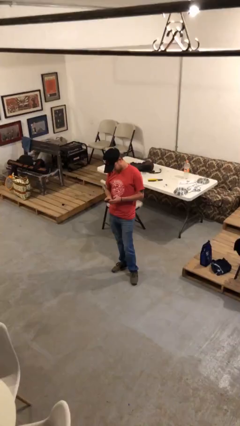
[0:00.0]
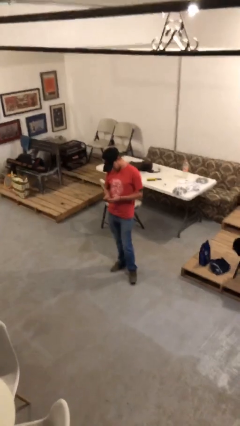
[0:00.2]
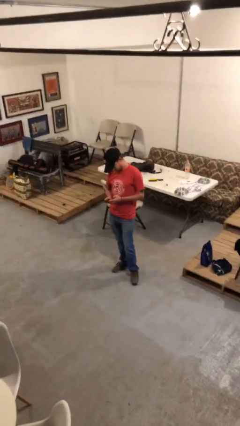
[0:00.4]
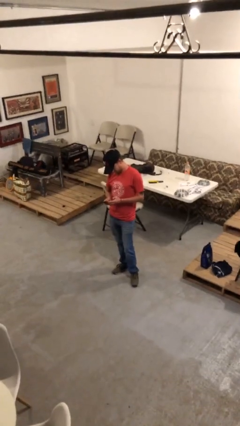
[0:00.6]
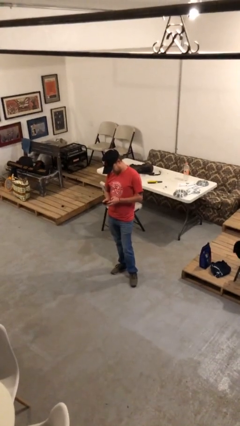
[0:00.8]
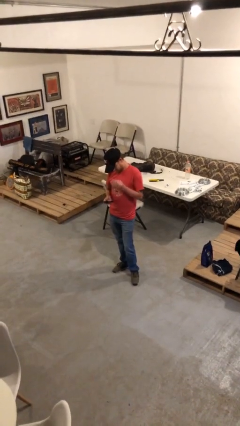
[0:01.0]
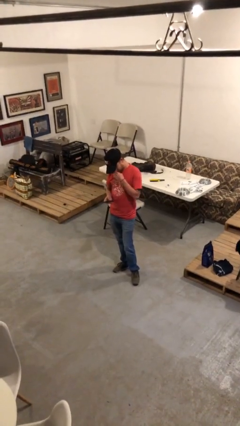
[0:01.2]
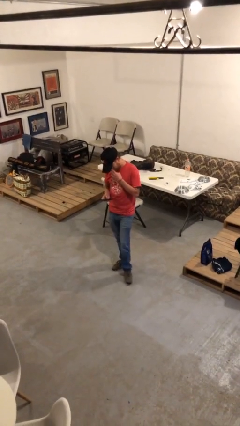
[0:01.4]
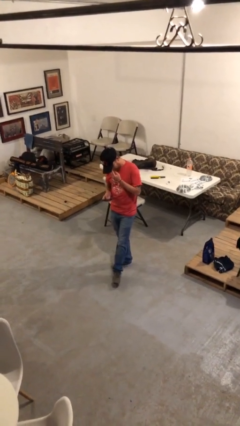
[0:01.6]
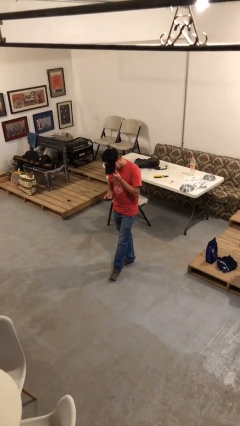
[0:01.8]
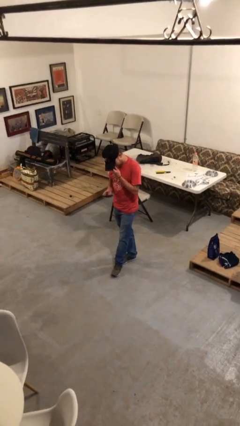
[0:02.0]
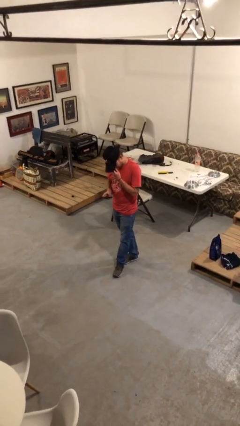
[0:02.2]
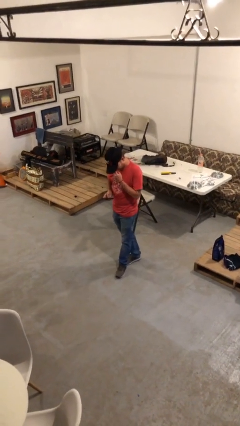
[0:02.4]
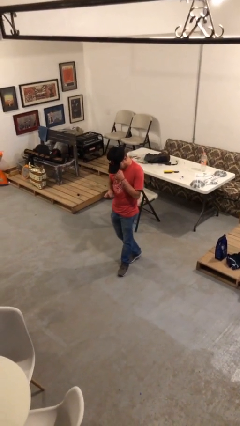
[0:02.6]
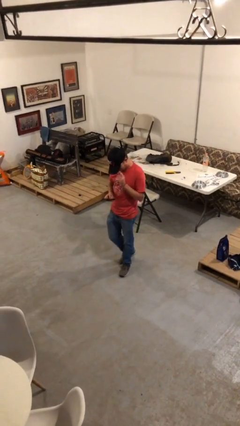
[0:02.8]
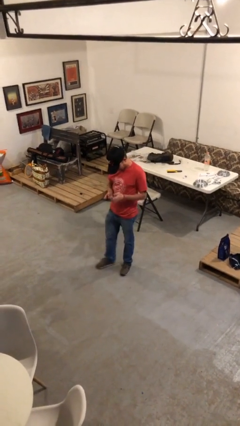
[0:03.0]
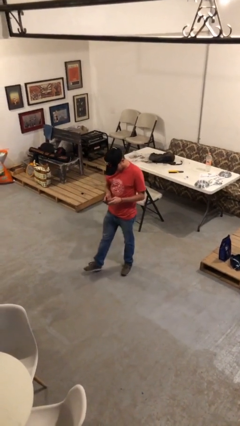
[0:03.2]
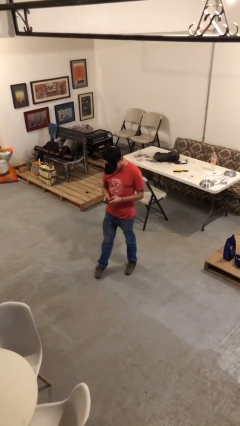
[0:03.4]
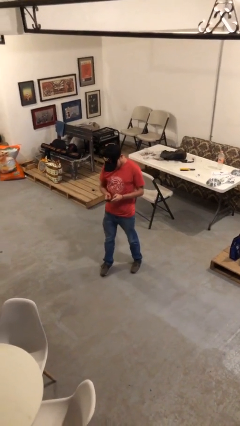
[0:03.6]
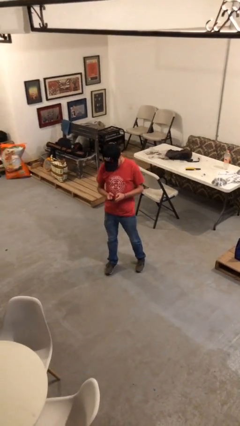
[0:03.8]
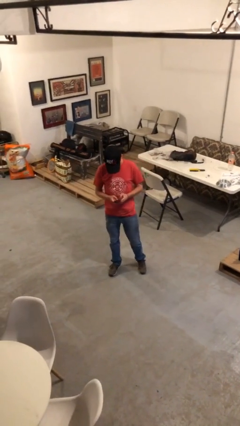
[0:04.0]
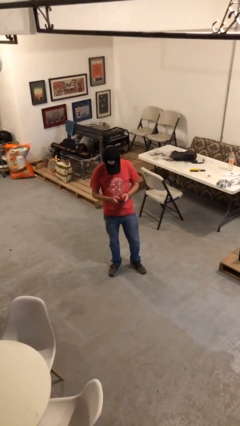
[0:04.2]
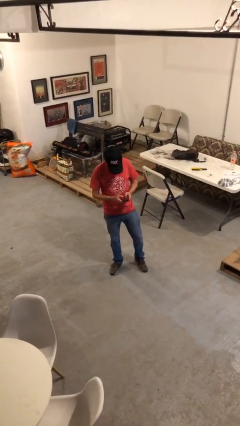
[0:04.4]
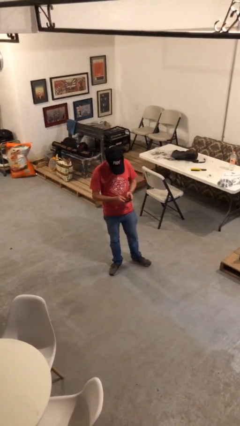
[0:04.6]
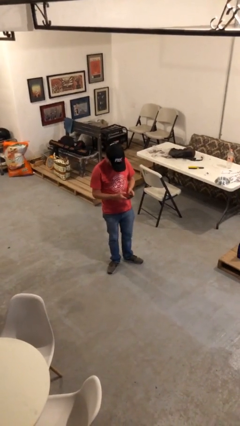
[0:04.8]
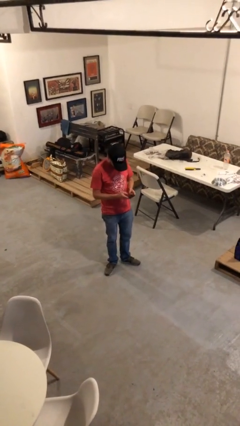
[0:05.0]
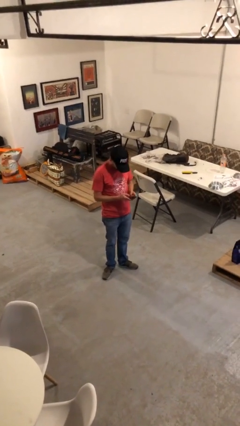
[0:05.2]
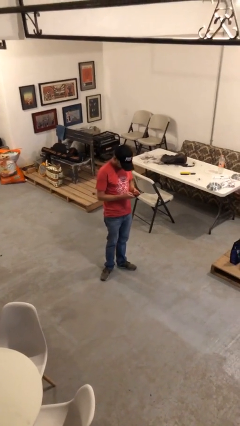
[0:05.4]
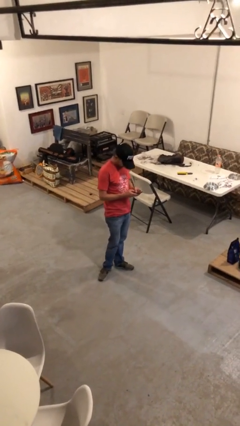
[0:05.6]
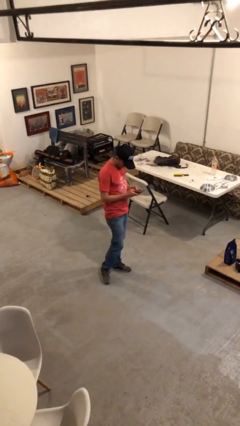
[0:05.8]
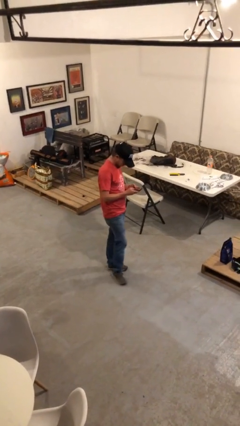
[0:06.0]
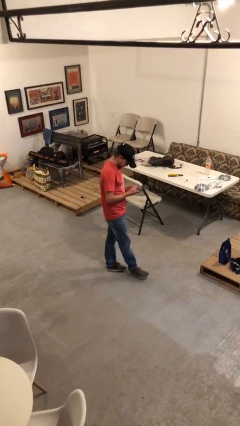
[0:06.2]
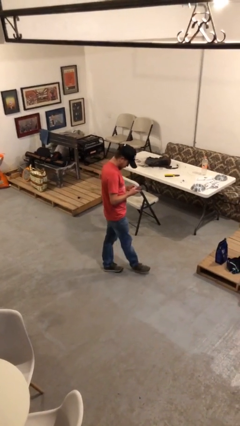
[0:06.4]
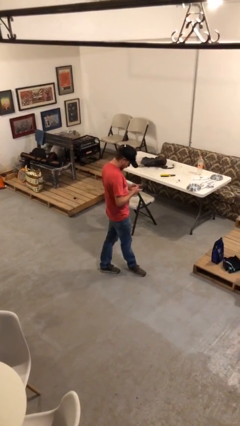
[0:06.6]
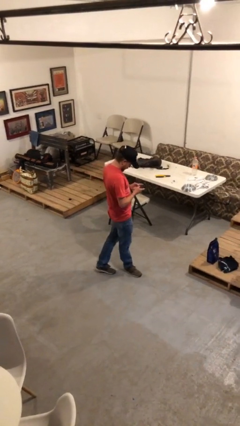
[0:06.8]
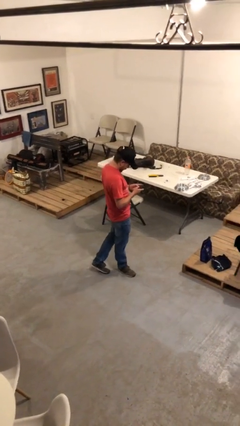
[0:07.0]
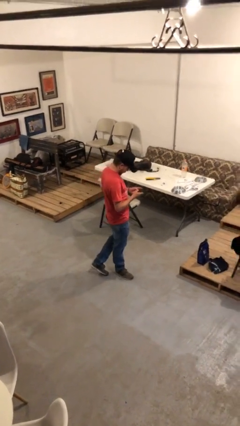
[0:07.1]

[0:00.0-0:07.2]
person texts on phone

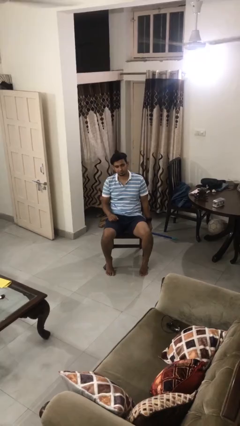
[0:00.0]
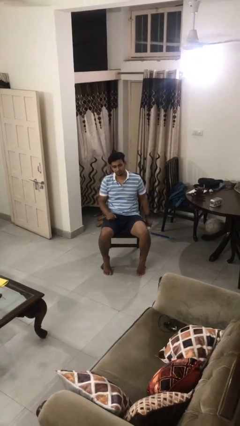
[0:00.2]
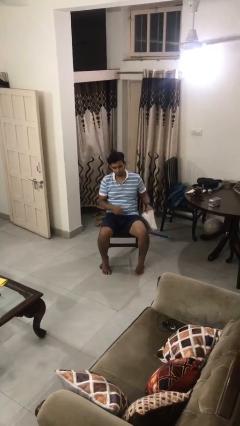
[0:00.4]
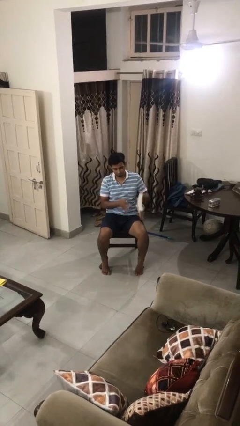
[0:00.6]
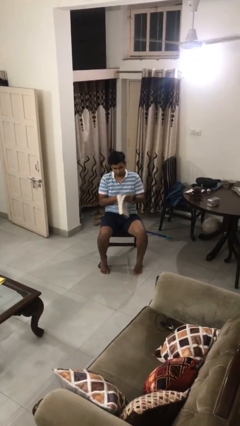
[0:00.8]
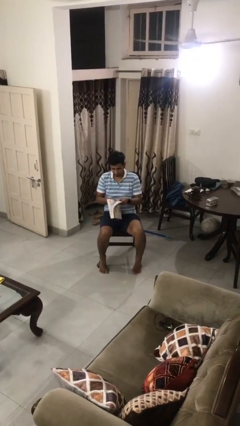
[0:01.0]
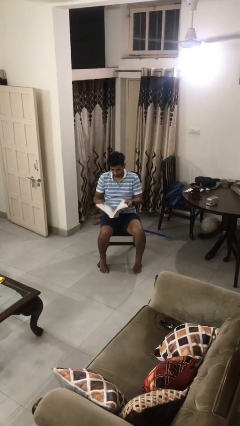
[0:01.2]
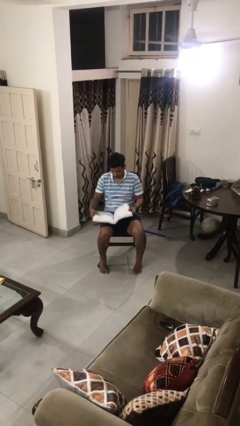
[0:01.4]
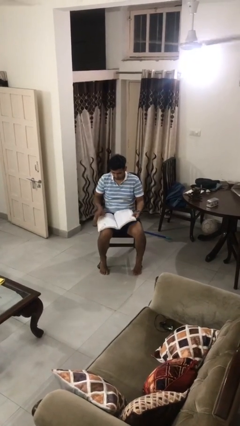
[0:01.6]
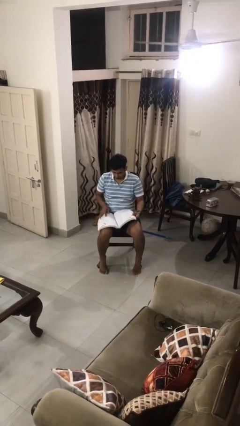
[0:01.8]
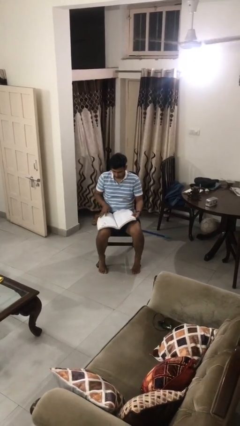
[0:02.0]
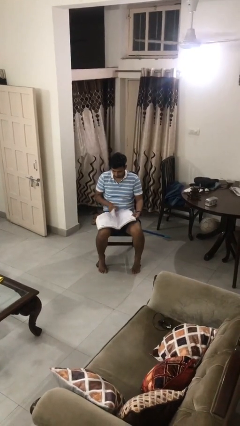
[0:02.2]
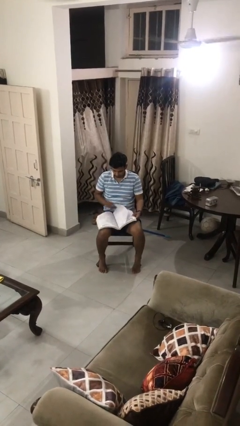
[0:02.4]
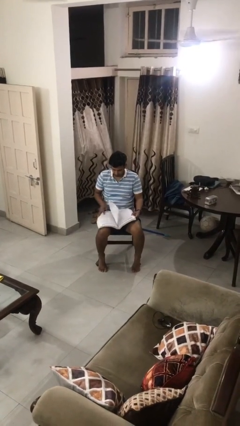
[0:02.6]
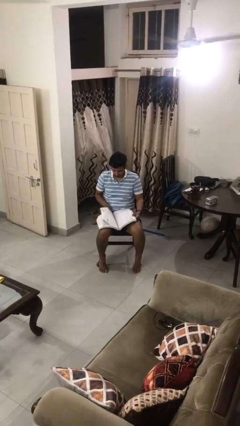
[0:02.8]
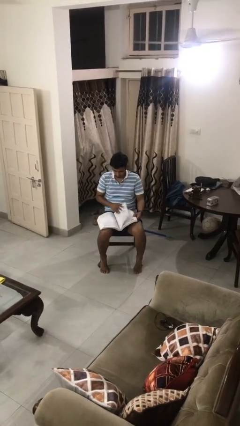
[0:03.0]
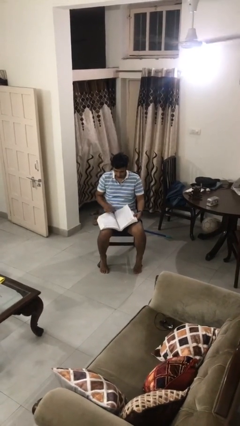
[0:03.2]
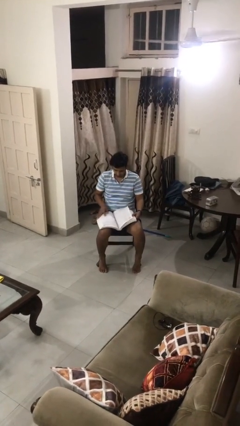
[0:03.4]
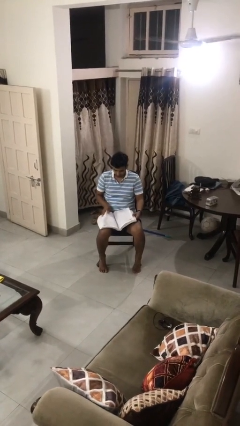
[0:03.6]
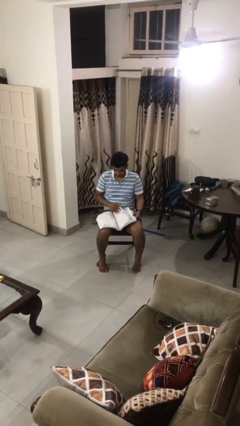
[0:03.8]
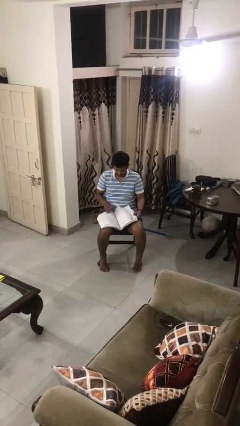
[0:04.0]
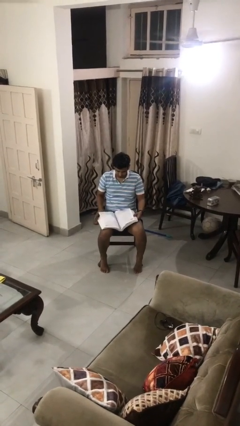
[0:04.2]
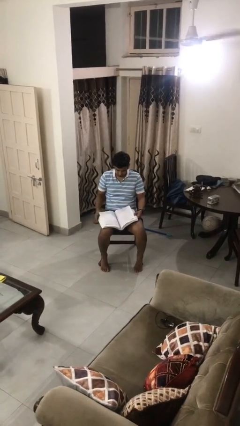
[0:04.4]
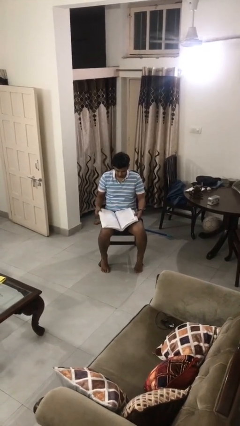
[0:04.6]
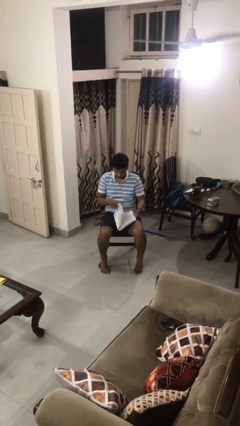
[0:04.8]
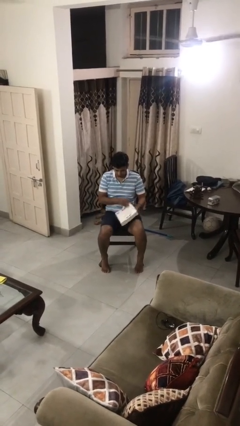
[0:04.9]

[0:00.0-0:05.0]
person reads book

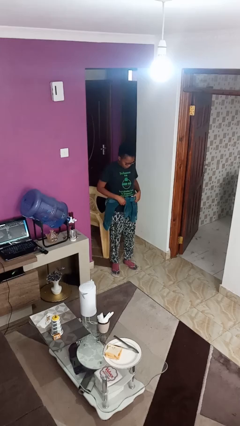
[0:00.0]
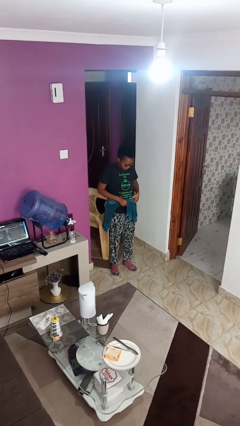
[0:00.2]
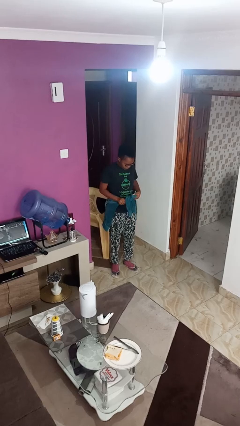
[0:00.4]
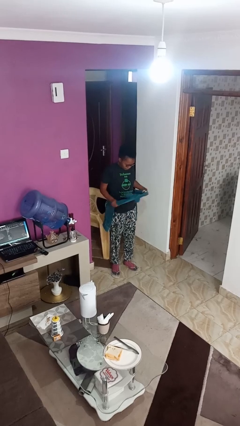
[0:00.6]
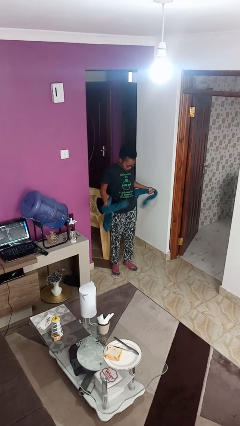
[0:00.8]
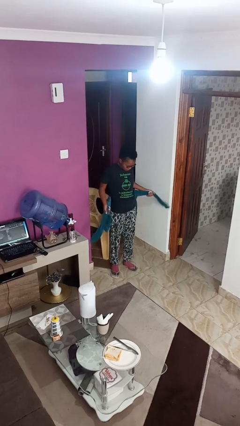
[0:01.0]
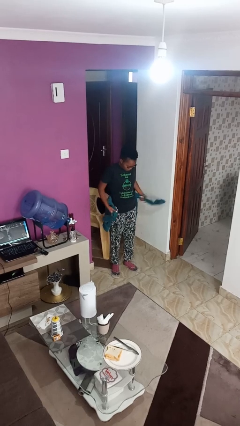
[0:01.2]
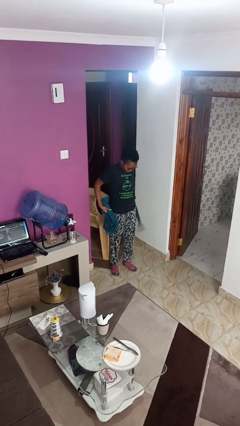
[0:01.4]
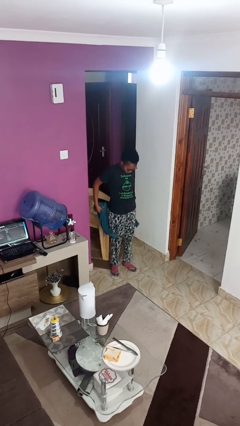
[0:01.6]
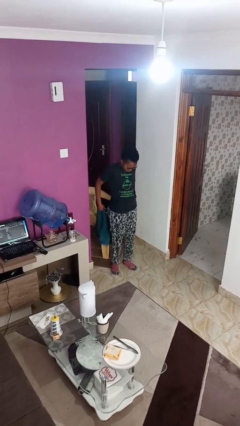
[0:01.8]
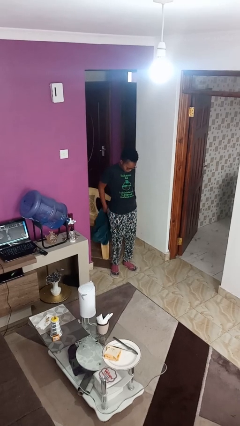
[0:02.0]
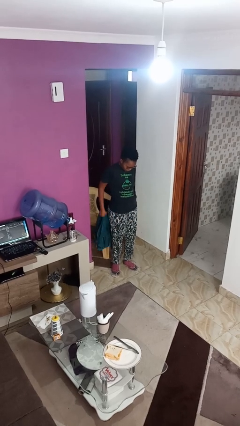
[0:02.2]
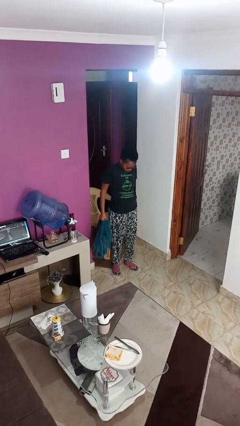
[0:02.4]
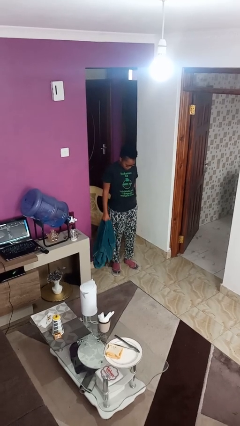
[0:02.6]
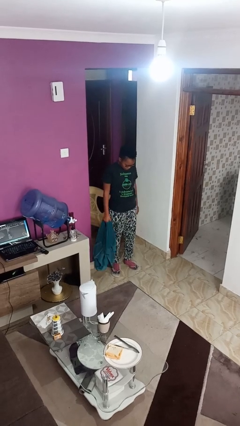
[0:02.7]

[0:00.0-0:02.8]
person unties jacket around waist

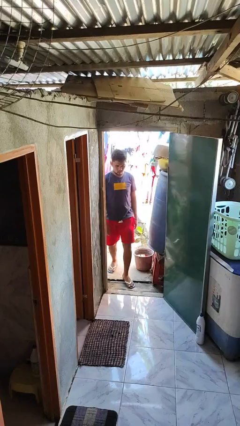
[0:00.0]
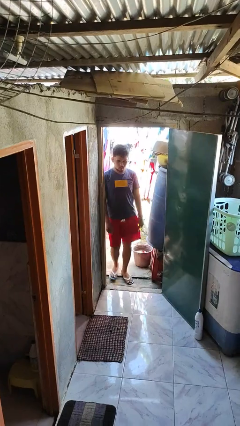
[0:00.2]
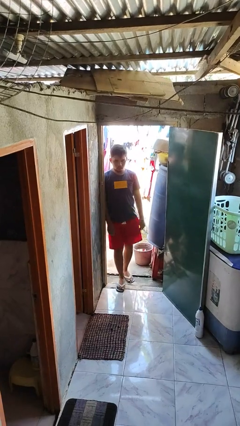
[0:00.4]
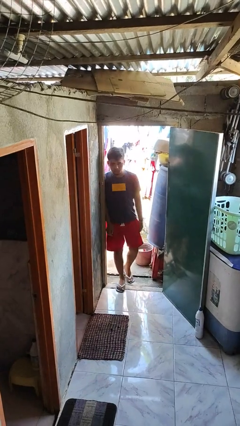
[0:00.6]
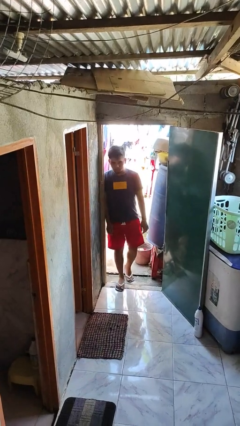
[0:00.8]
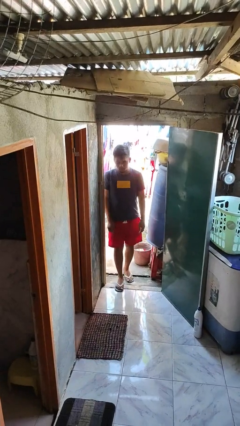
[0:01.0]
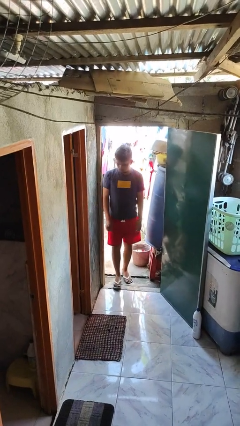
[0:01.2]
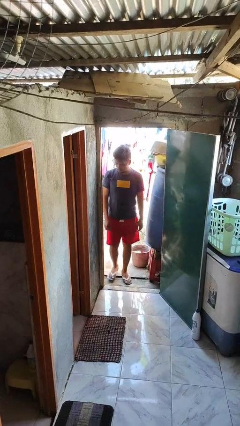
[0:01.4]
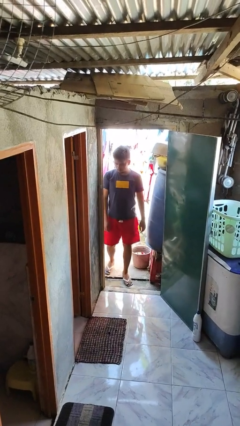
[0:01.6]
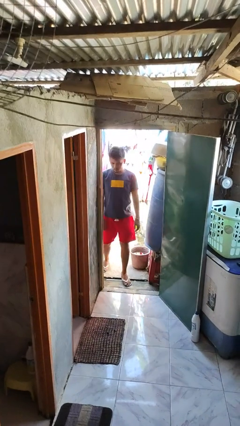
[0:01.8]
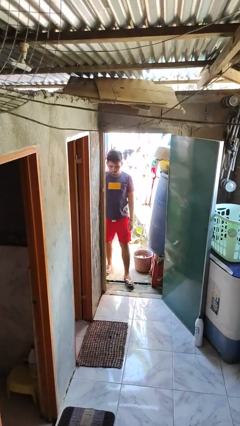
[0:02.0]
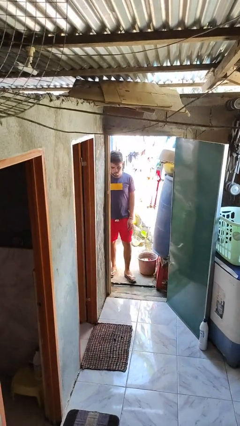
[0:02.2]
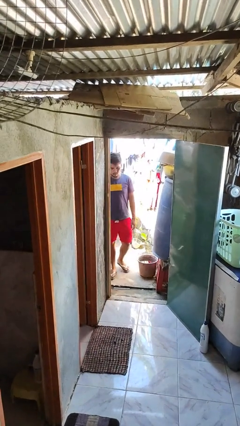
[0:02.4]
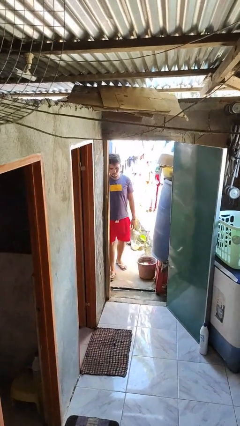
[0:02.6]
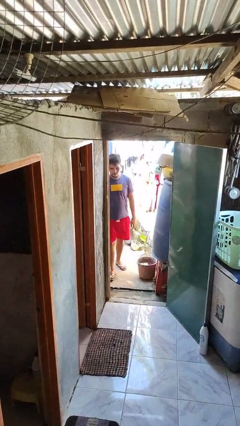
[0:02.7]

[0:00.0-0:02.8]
person bumps into wall
